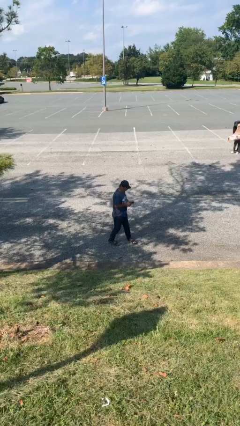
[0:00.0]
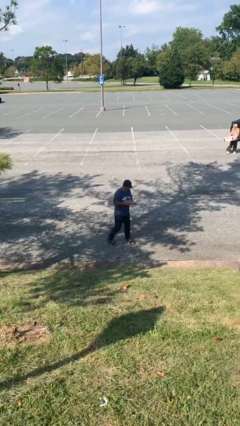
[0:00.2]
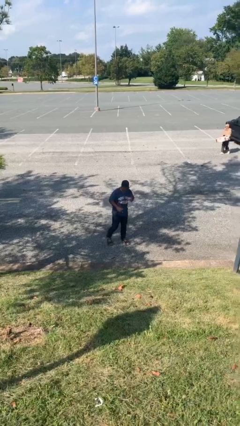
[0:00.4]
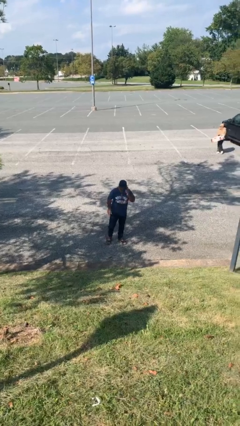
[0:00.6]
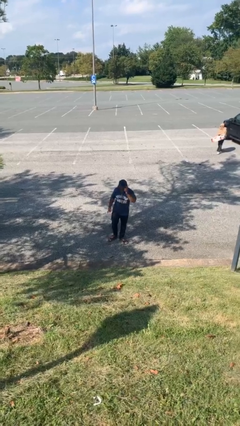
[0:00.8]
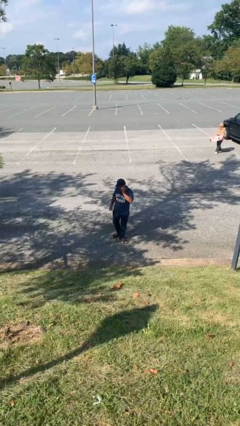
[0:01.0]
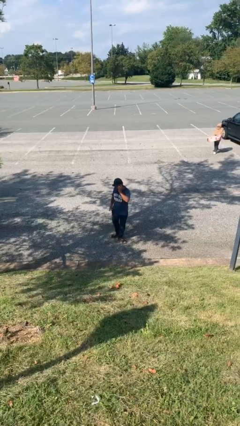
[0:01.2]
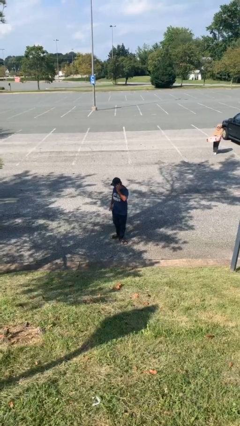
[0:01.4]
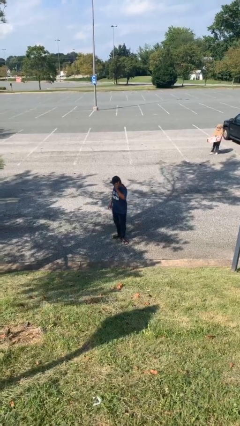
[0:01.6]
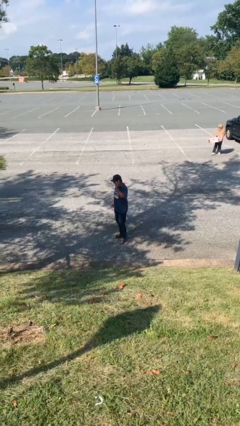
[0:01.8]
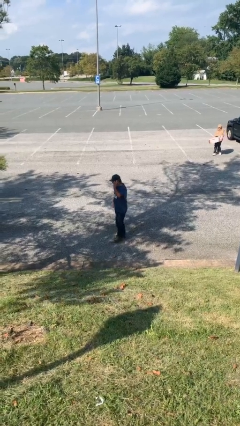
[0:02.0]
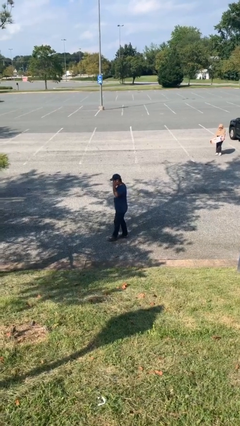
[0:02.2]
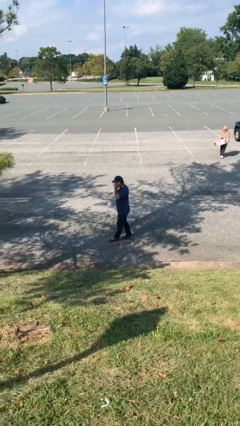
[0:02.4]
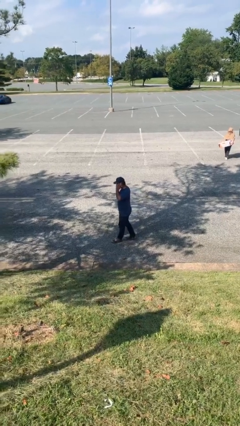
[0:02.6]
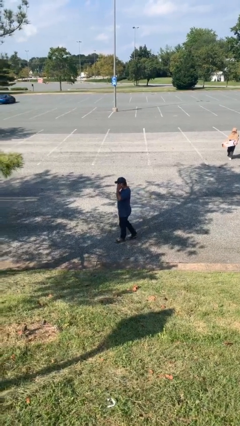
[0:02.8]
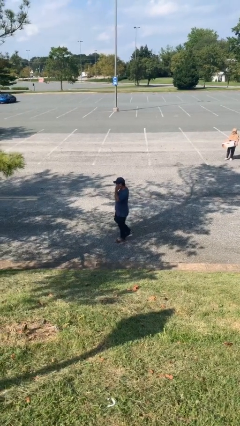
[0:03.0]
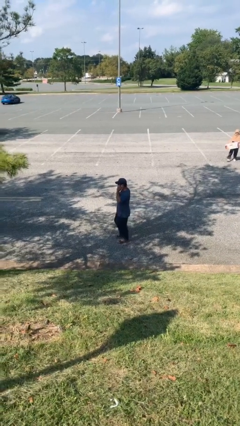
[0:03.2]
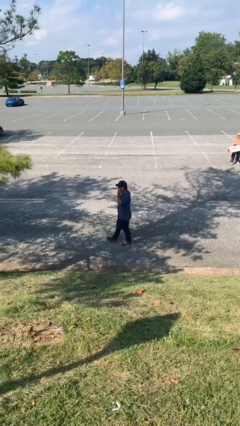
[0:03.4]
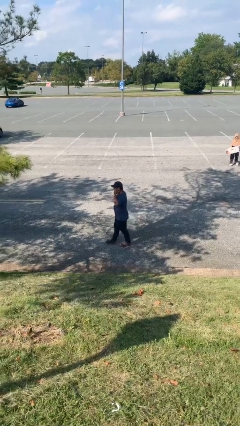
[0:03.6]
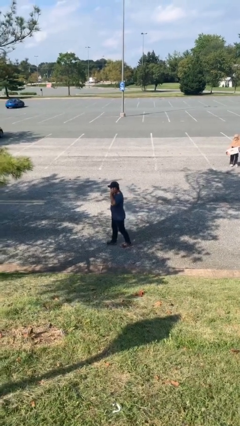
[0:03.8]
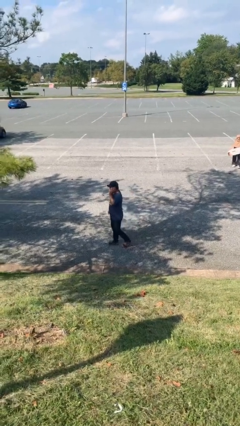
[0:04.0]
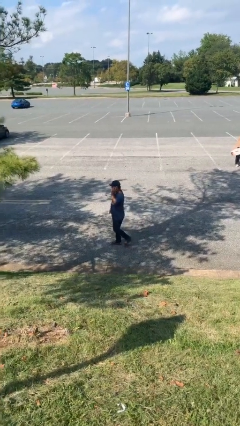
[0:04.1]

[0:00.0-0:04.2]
person talks on phone

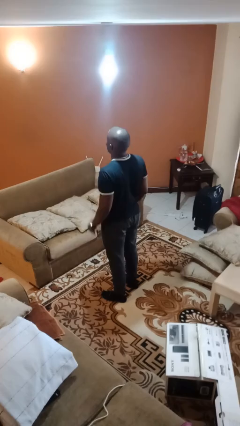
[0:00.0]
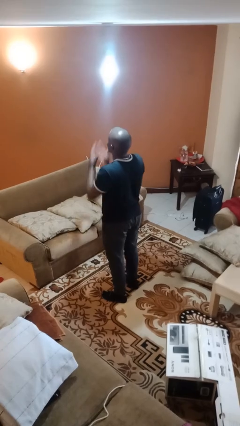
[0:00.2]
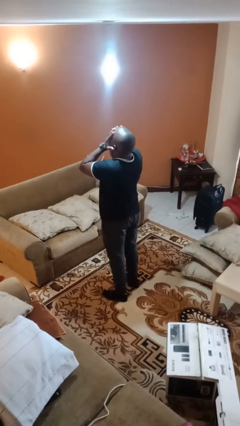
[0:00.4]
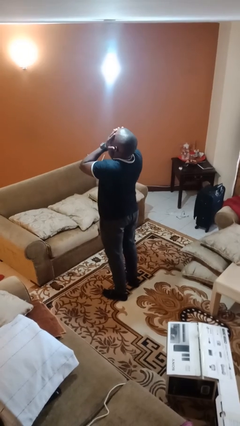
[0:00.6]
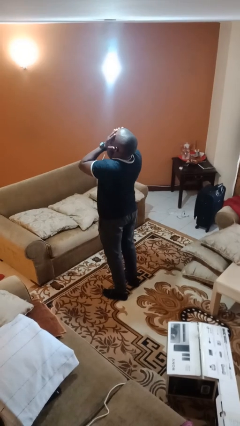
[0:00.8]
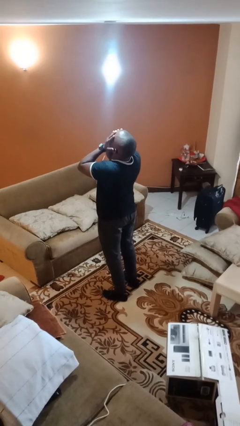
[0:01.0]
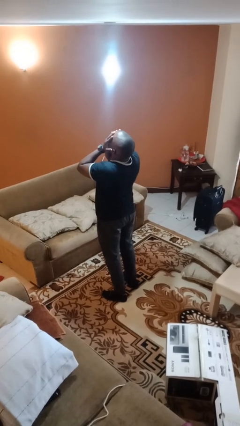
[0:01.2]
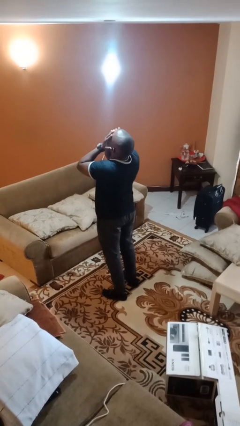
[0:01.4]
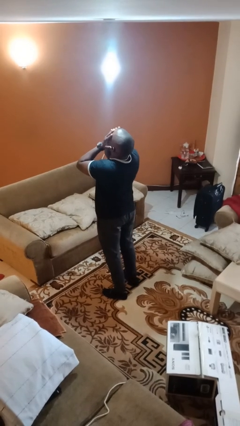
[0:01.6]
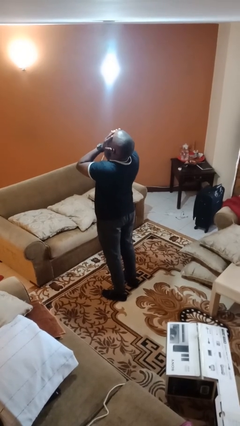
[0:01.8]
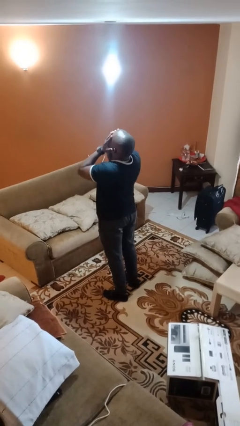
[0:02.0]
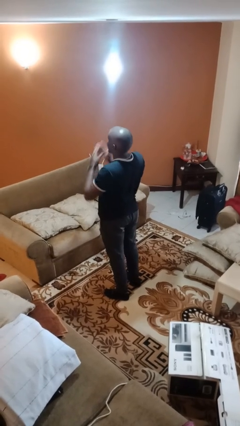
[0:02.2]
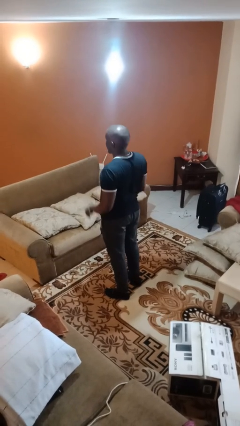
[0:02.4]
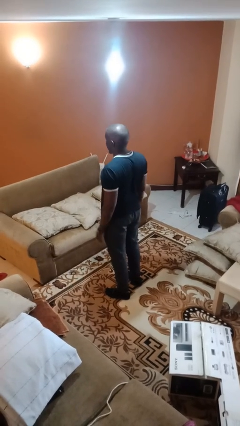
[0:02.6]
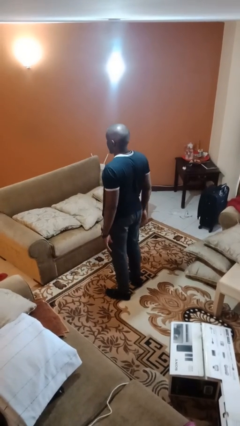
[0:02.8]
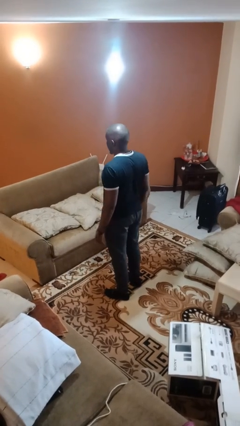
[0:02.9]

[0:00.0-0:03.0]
person covers face with hands

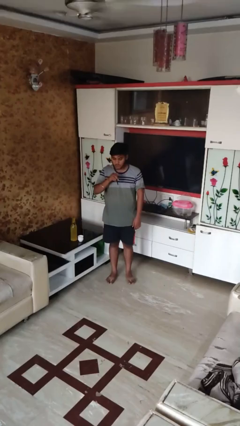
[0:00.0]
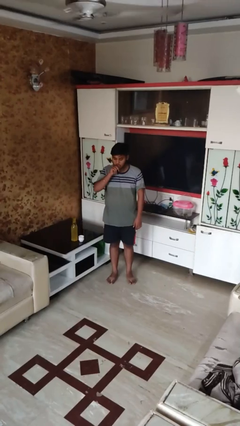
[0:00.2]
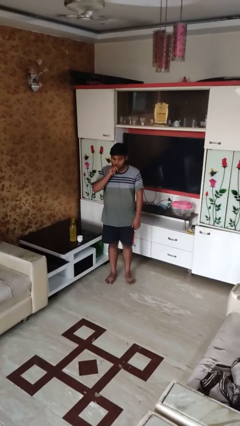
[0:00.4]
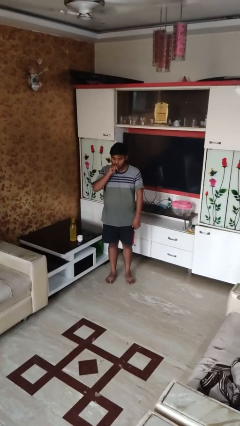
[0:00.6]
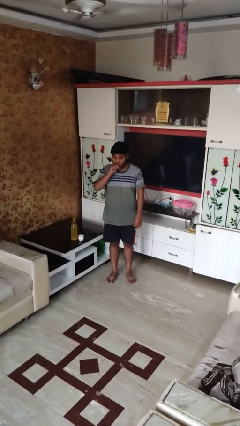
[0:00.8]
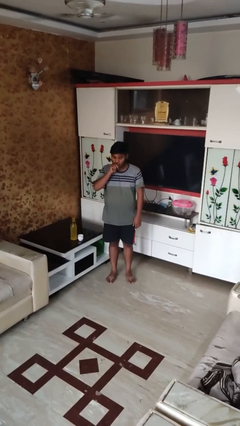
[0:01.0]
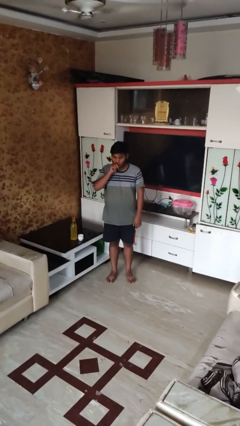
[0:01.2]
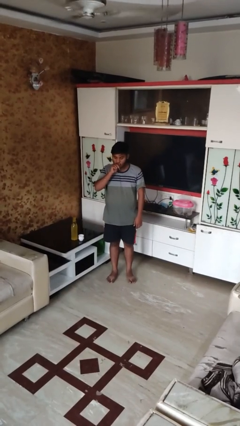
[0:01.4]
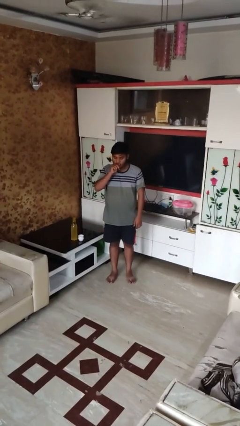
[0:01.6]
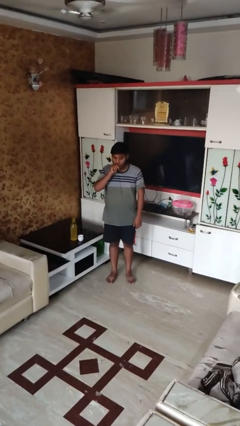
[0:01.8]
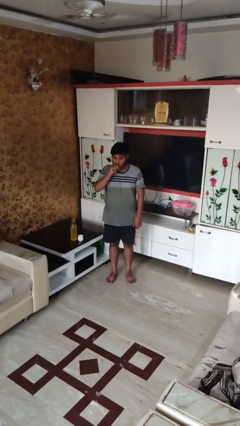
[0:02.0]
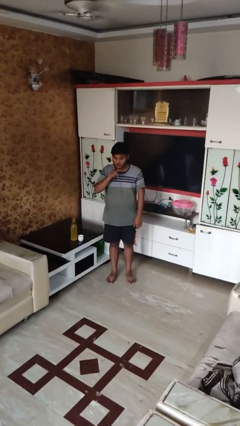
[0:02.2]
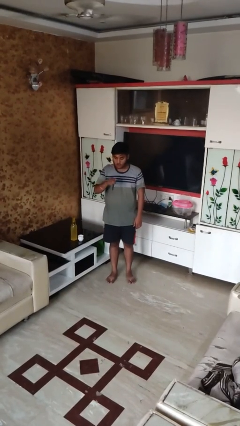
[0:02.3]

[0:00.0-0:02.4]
person vapes

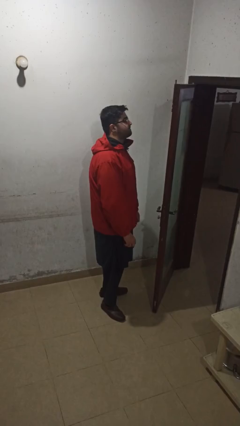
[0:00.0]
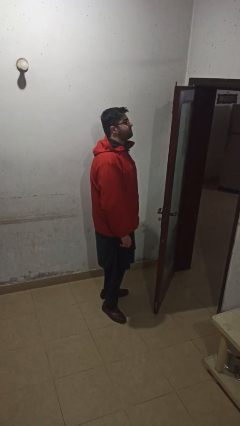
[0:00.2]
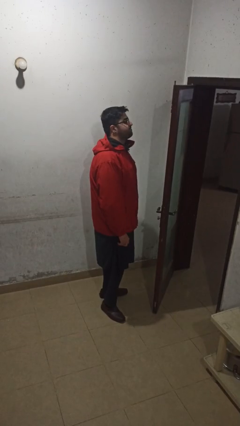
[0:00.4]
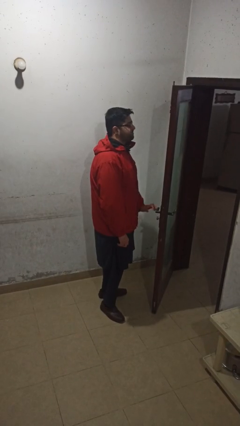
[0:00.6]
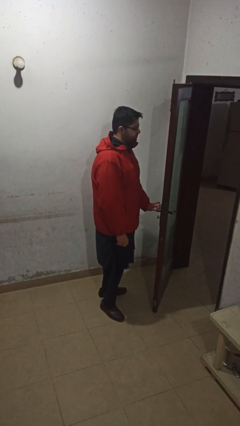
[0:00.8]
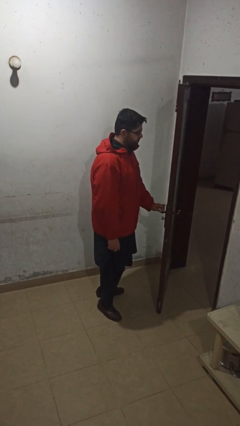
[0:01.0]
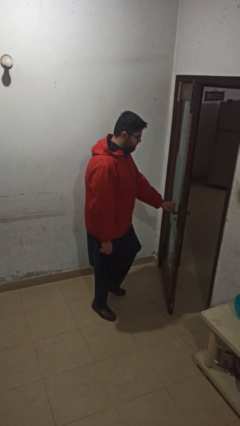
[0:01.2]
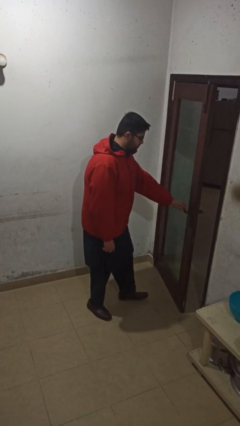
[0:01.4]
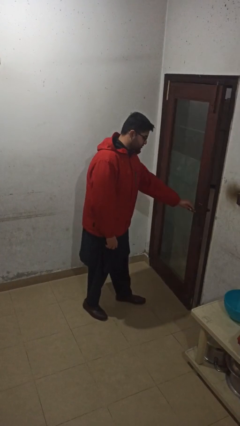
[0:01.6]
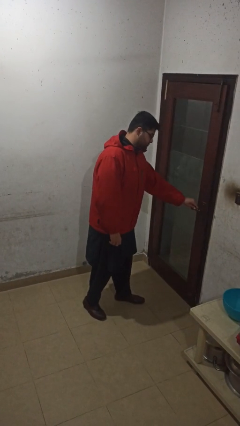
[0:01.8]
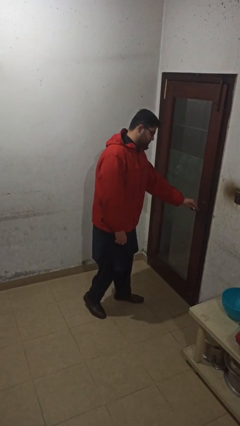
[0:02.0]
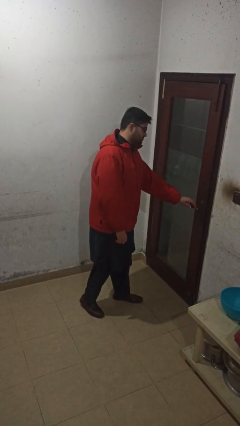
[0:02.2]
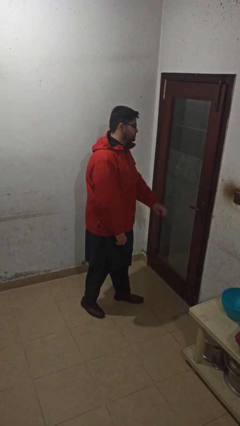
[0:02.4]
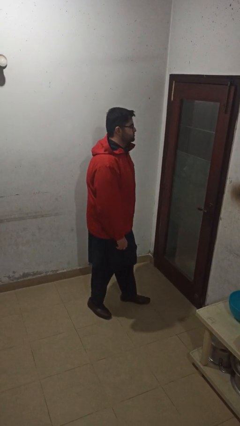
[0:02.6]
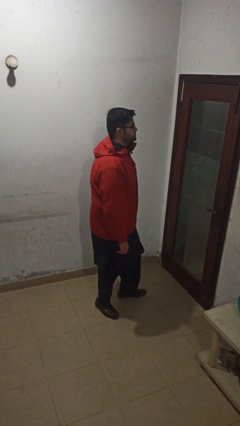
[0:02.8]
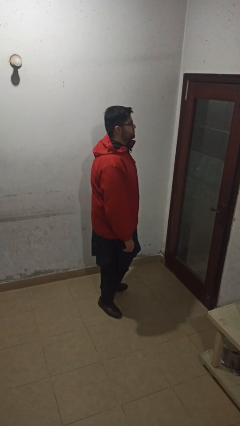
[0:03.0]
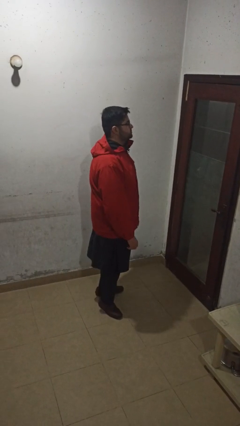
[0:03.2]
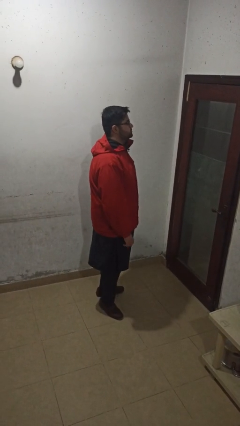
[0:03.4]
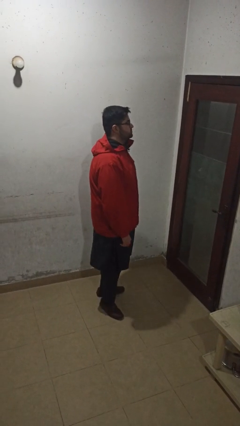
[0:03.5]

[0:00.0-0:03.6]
person closes facility door

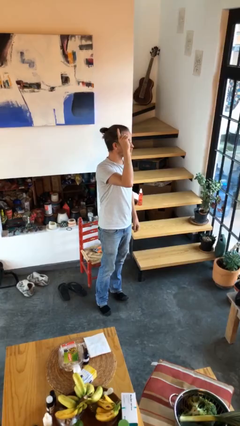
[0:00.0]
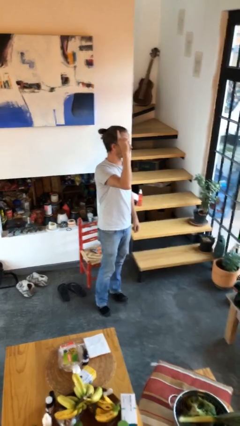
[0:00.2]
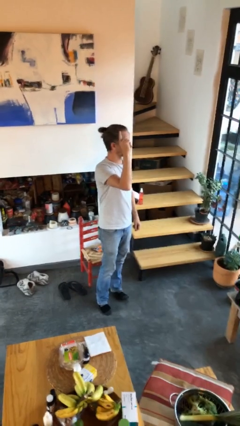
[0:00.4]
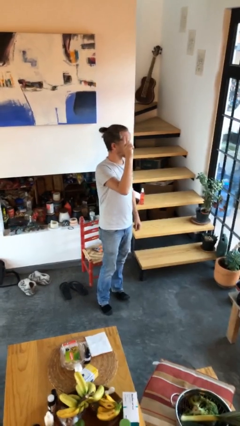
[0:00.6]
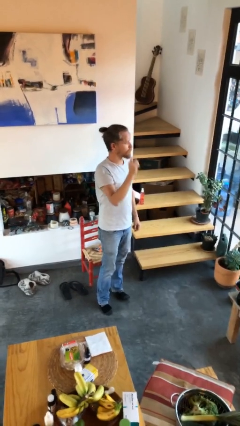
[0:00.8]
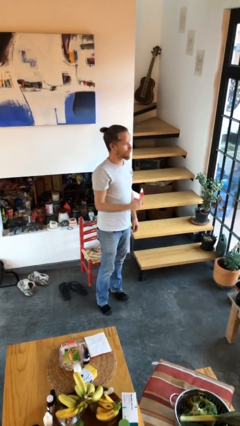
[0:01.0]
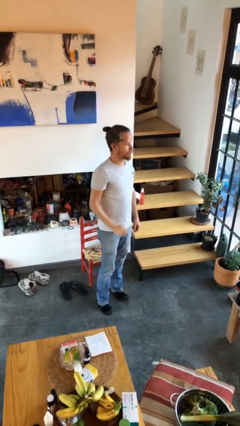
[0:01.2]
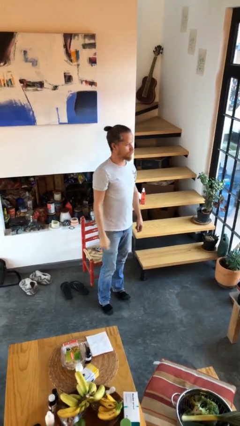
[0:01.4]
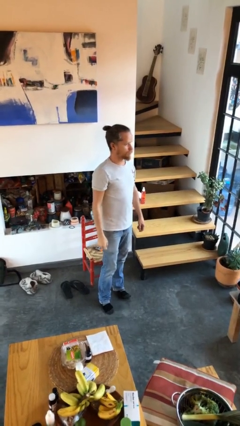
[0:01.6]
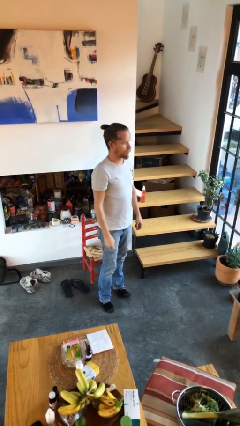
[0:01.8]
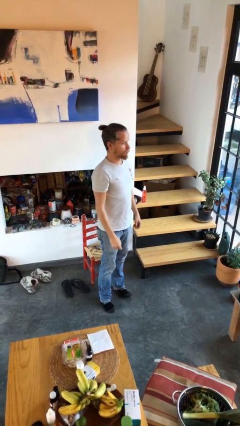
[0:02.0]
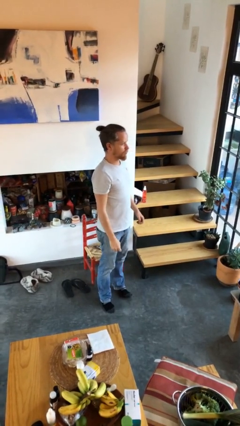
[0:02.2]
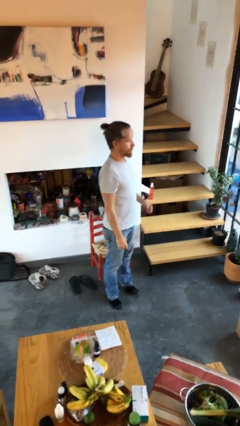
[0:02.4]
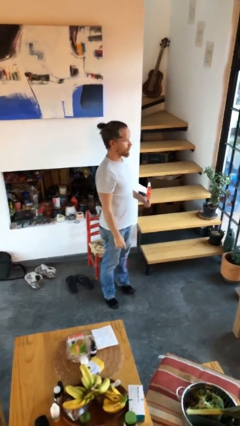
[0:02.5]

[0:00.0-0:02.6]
person gestures lower hand

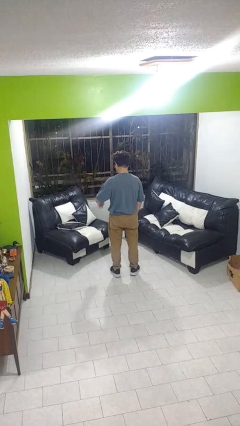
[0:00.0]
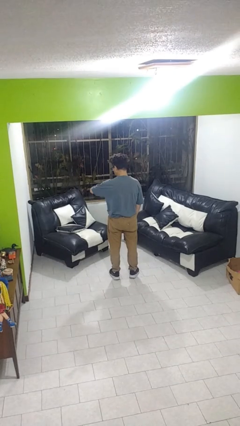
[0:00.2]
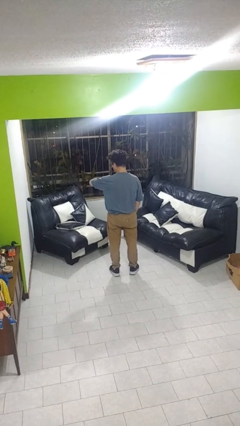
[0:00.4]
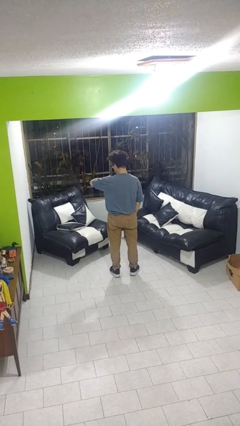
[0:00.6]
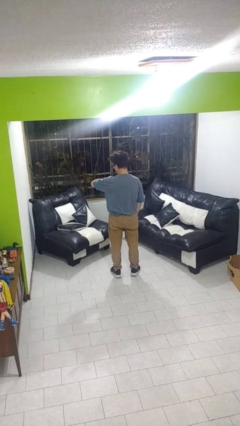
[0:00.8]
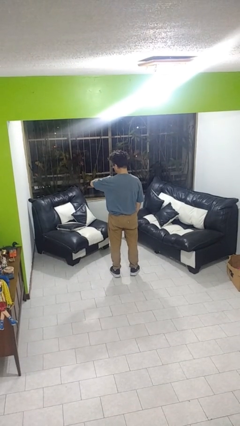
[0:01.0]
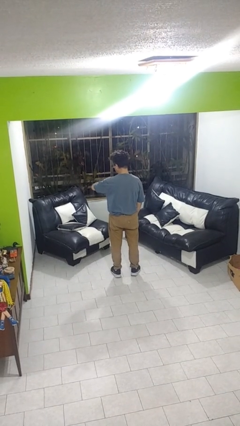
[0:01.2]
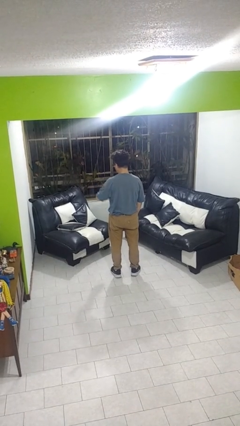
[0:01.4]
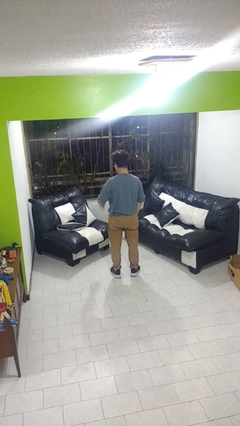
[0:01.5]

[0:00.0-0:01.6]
person looks at wristwatch
